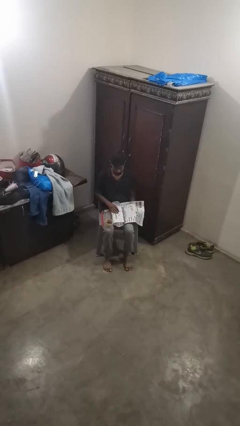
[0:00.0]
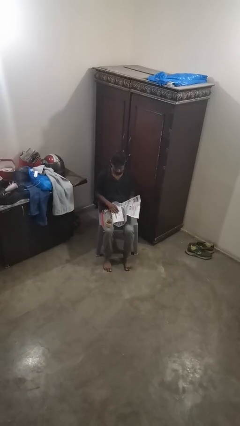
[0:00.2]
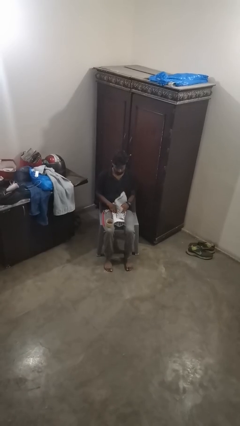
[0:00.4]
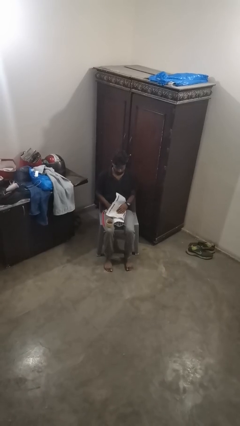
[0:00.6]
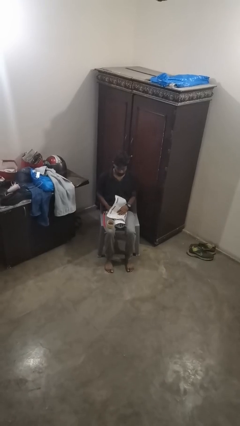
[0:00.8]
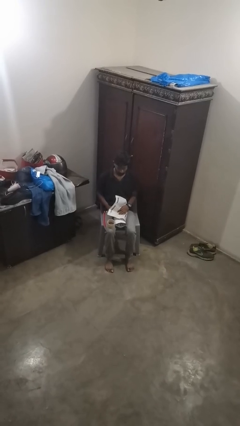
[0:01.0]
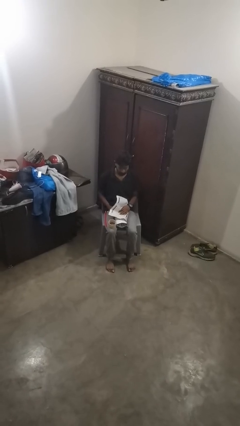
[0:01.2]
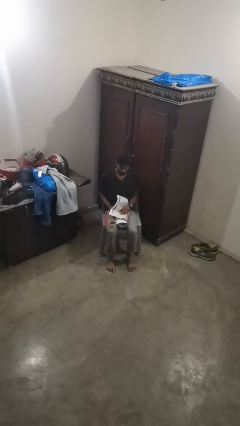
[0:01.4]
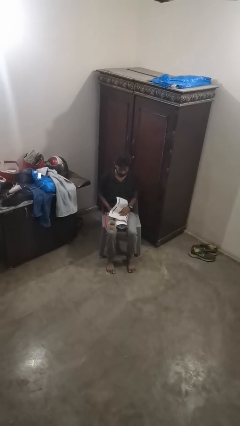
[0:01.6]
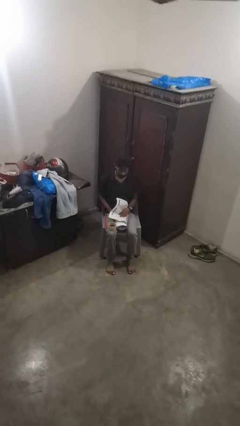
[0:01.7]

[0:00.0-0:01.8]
person wraps box

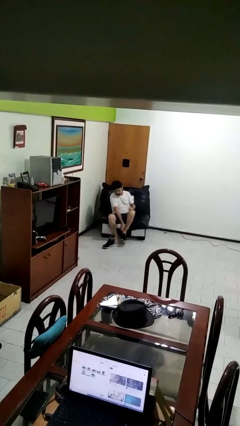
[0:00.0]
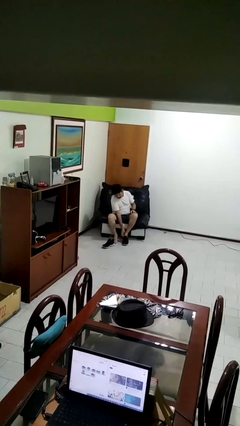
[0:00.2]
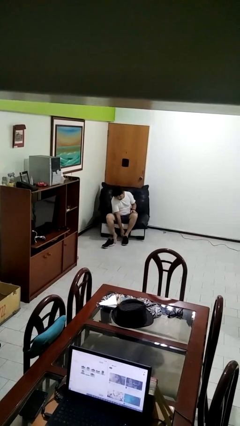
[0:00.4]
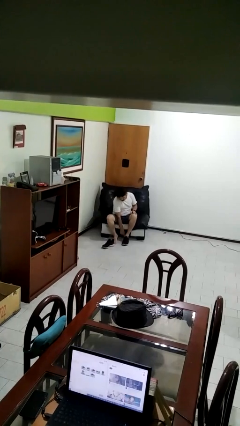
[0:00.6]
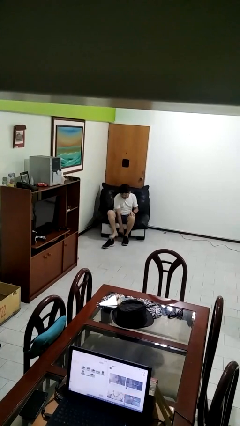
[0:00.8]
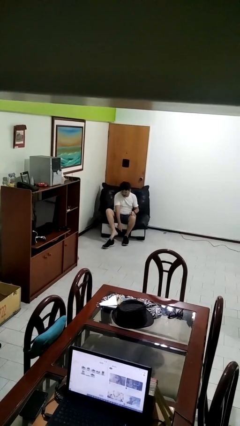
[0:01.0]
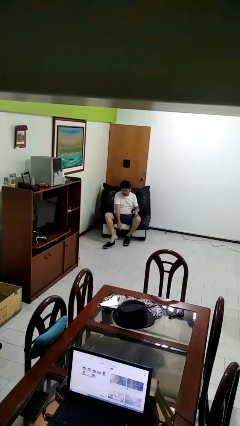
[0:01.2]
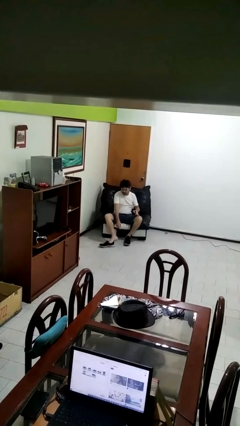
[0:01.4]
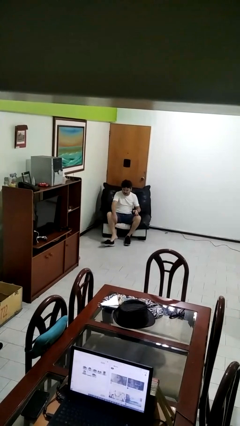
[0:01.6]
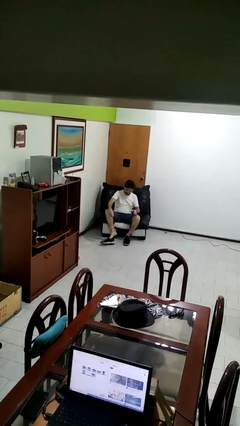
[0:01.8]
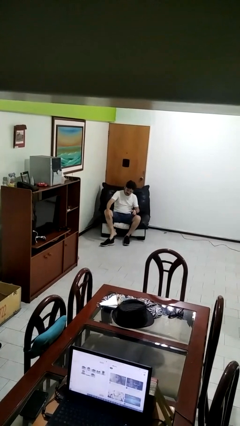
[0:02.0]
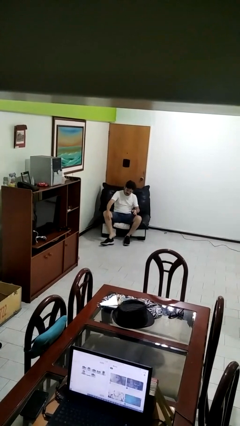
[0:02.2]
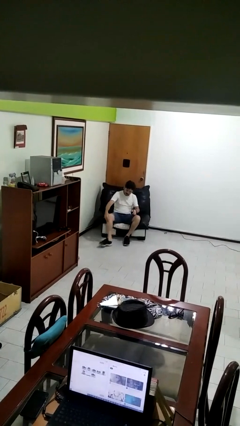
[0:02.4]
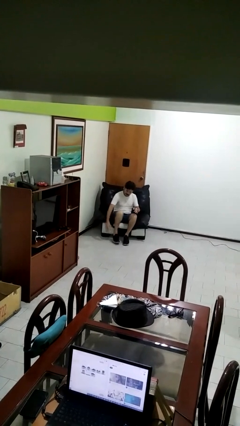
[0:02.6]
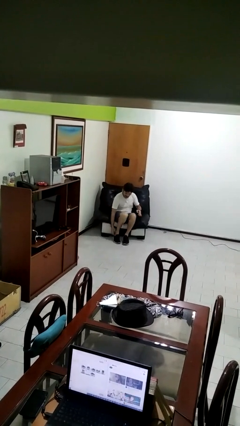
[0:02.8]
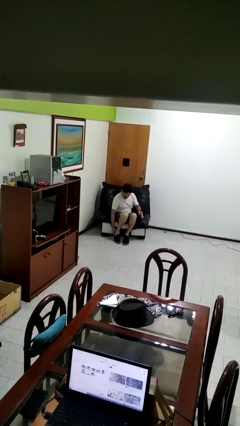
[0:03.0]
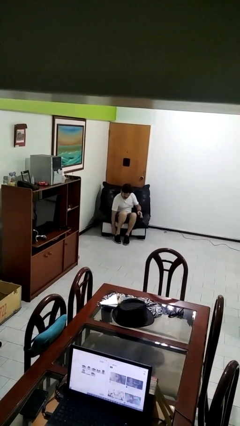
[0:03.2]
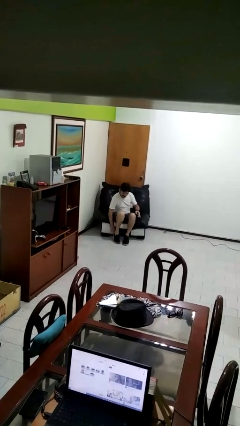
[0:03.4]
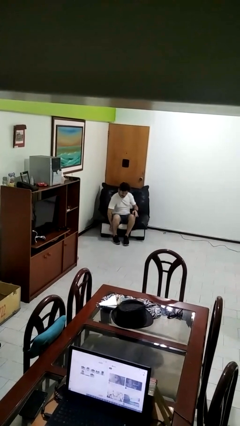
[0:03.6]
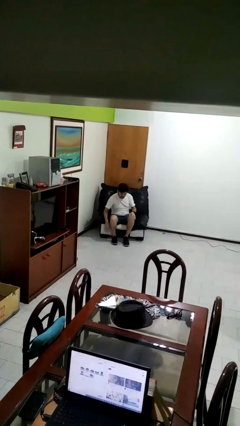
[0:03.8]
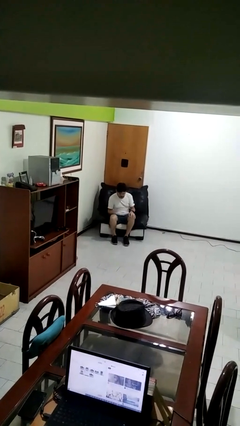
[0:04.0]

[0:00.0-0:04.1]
person puts on shoes

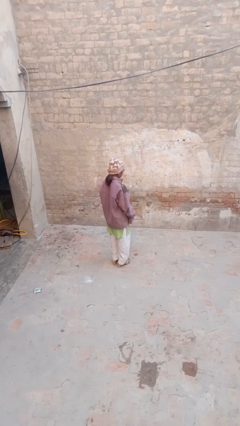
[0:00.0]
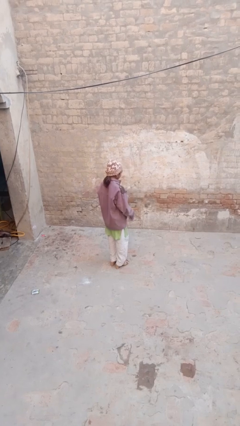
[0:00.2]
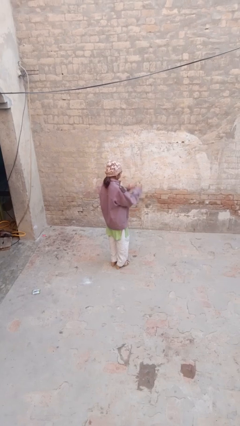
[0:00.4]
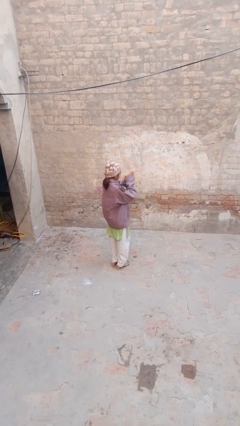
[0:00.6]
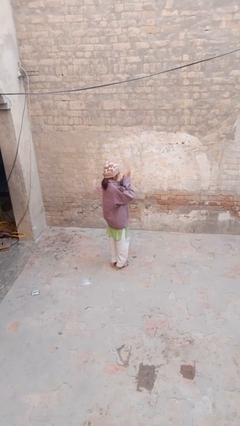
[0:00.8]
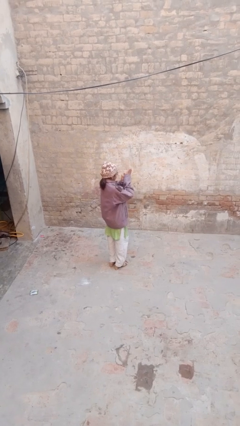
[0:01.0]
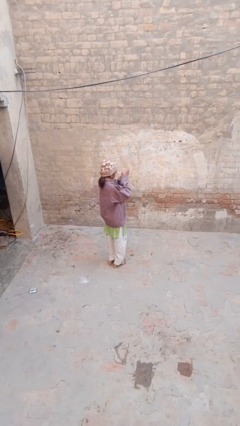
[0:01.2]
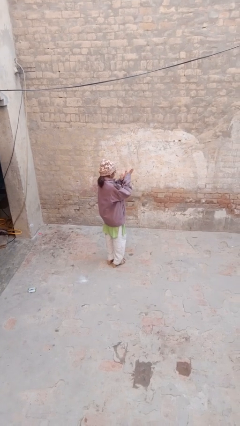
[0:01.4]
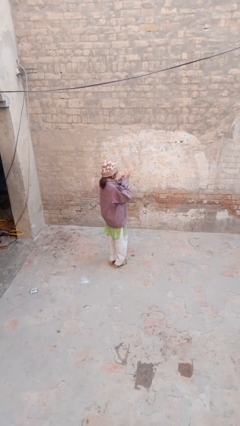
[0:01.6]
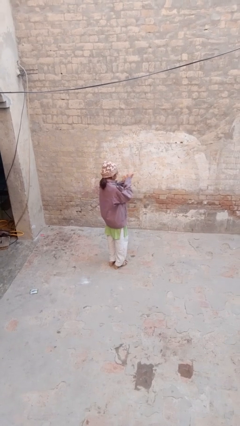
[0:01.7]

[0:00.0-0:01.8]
person blows into hands

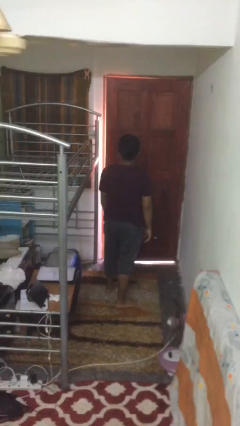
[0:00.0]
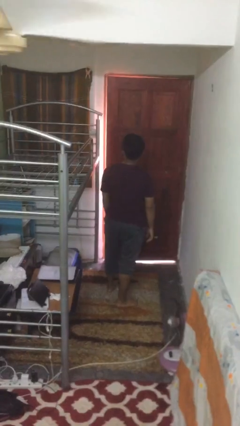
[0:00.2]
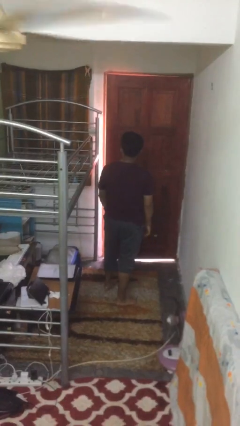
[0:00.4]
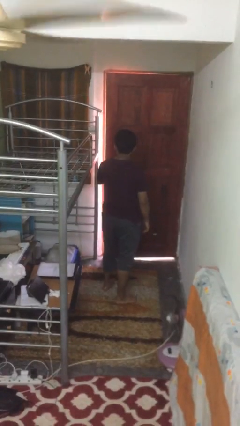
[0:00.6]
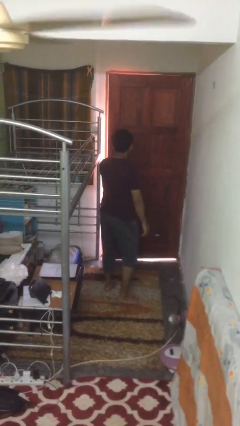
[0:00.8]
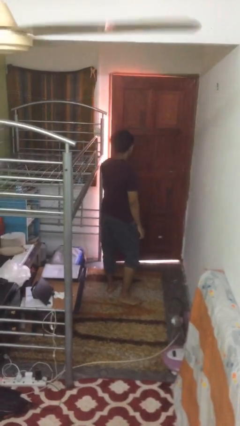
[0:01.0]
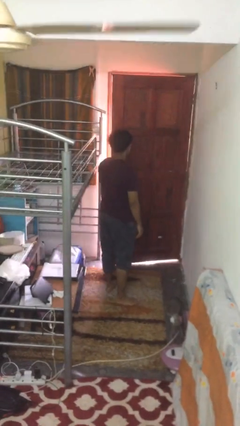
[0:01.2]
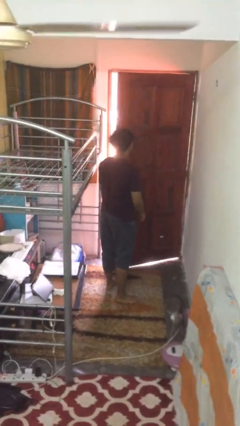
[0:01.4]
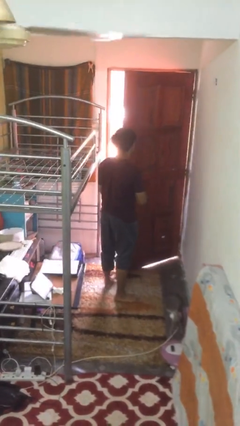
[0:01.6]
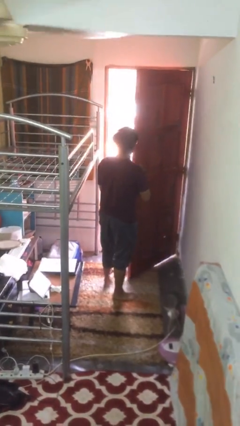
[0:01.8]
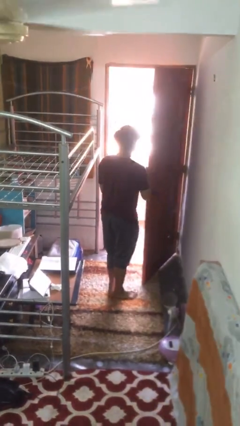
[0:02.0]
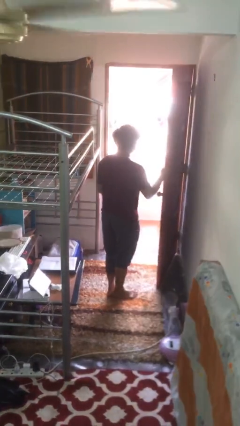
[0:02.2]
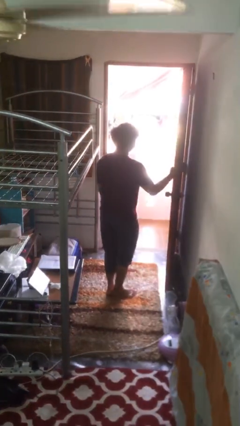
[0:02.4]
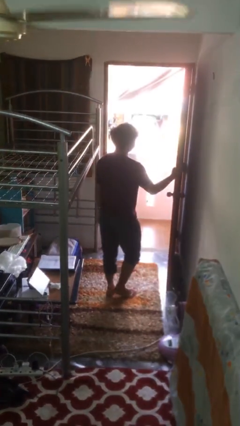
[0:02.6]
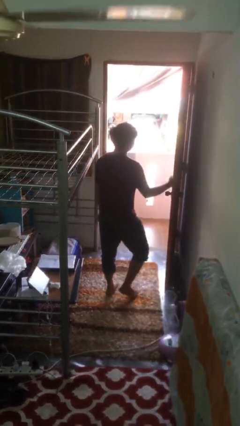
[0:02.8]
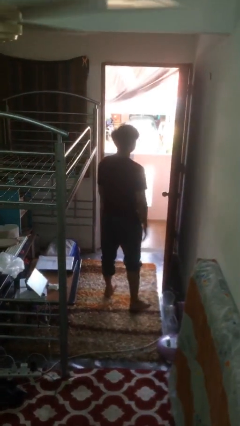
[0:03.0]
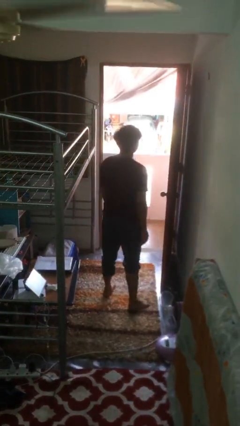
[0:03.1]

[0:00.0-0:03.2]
person opens facility door

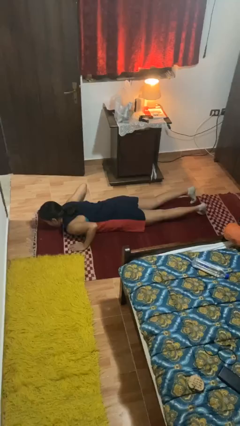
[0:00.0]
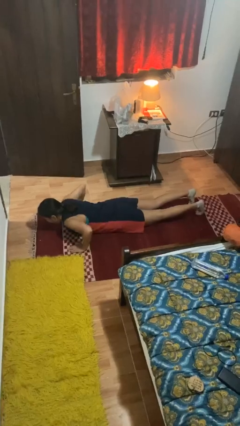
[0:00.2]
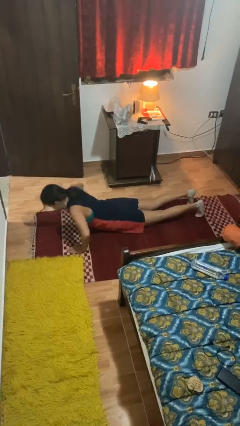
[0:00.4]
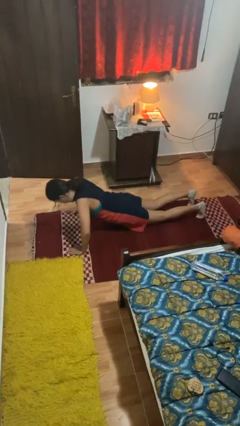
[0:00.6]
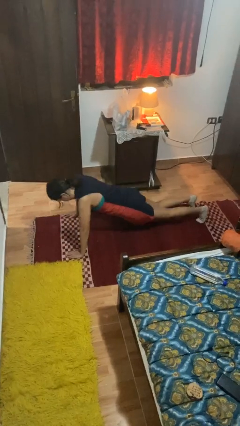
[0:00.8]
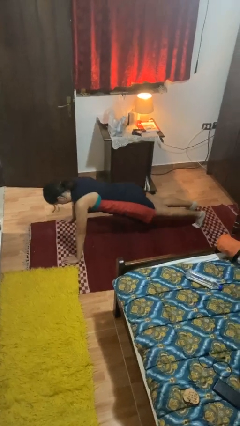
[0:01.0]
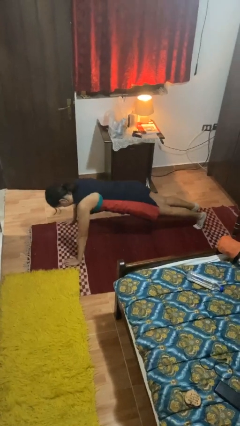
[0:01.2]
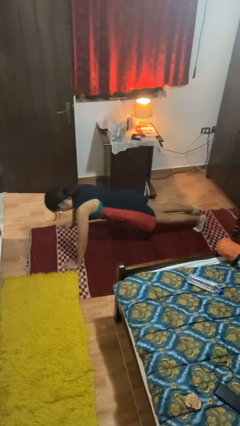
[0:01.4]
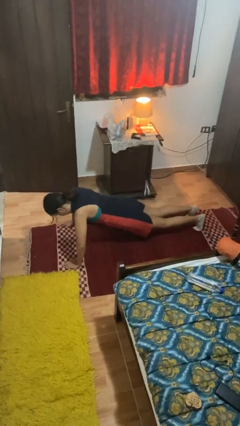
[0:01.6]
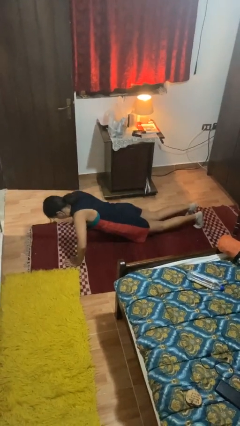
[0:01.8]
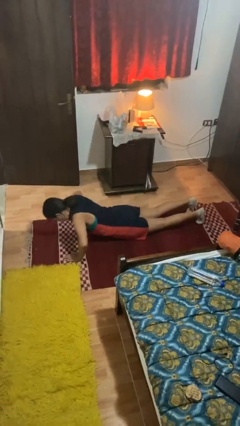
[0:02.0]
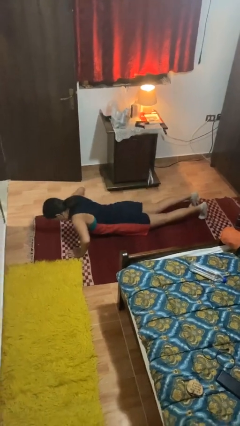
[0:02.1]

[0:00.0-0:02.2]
person exercises with pushup

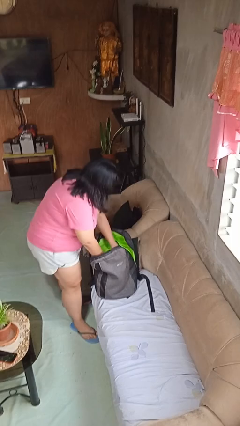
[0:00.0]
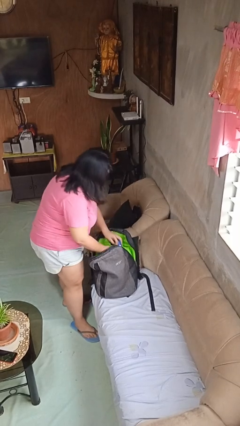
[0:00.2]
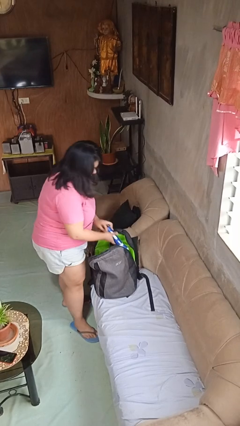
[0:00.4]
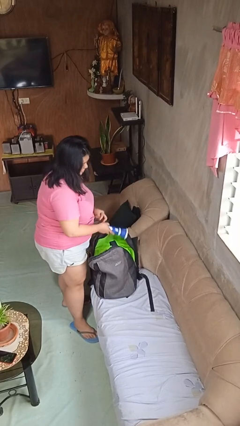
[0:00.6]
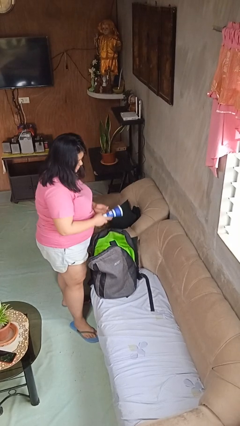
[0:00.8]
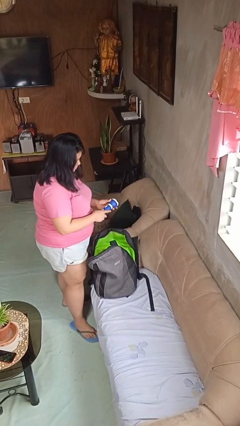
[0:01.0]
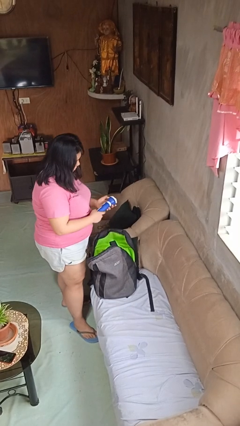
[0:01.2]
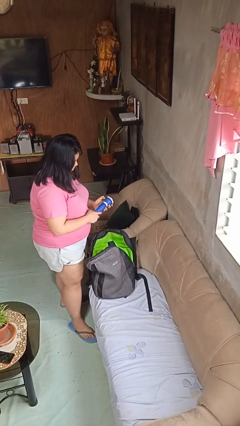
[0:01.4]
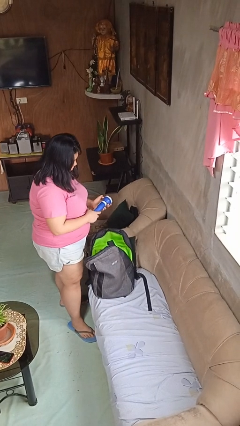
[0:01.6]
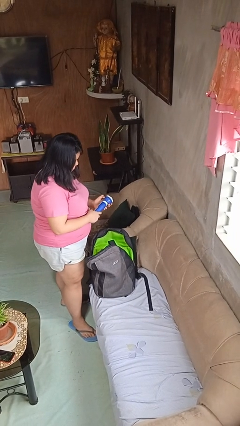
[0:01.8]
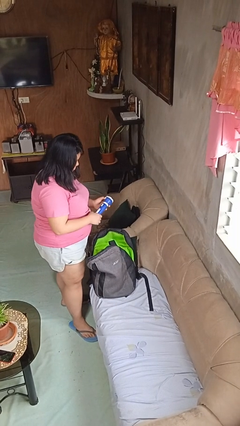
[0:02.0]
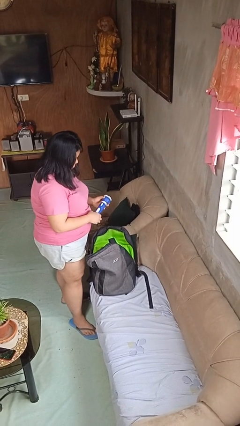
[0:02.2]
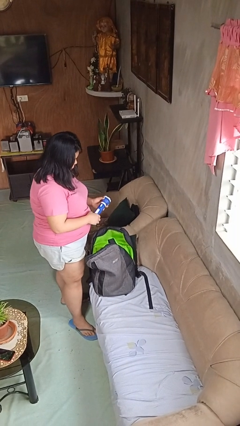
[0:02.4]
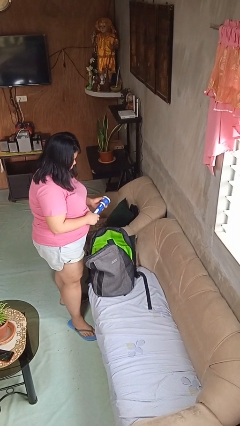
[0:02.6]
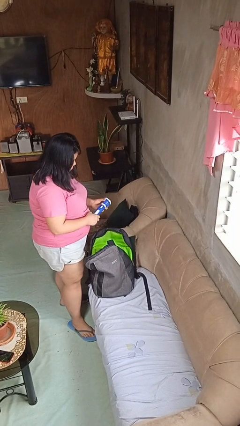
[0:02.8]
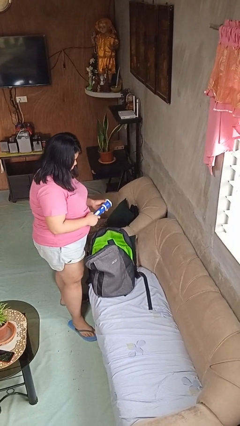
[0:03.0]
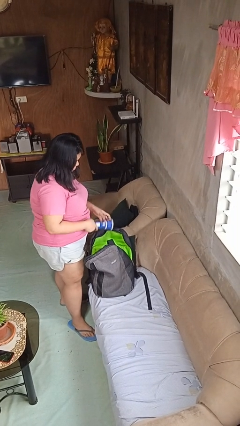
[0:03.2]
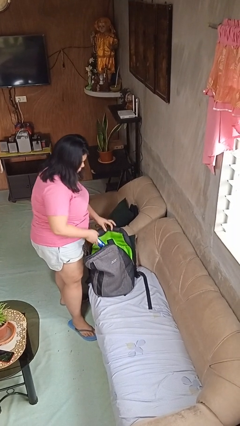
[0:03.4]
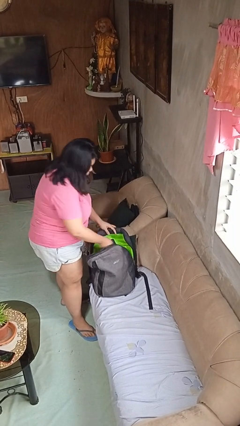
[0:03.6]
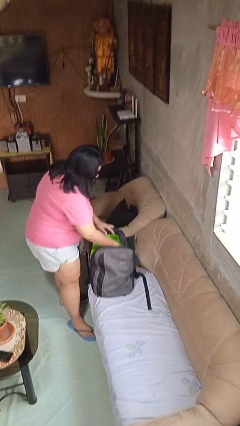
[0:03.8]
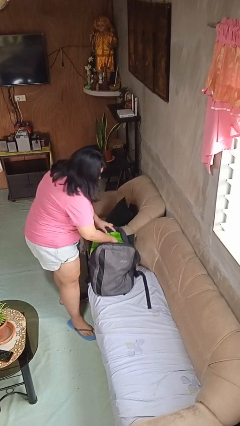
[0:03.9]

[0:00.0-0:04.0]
person takes object from backpack

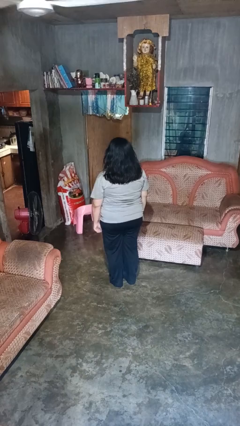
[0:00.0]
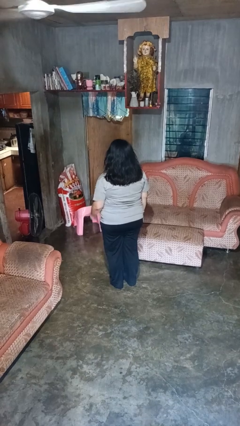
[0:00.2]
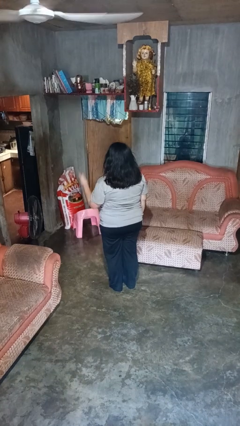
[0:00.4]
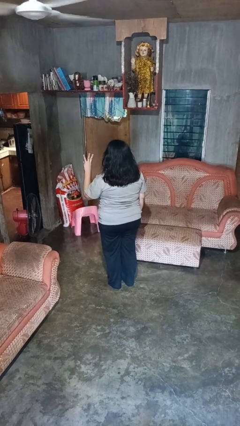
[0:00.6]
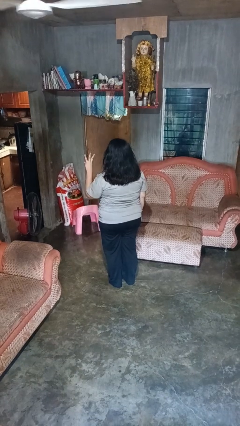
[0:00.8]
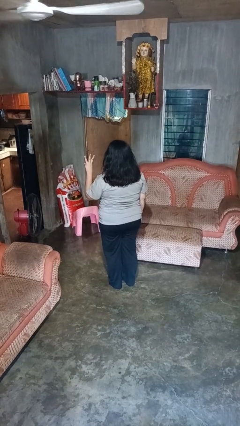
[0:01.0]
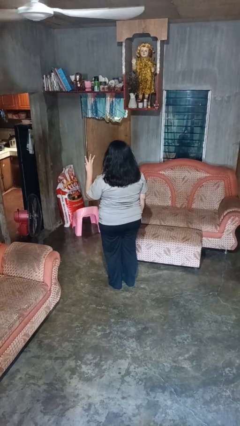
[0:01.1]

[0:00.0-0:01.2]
person gestures number three
